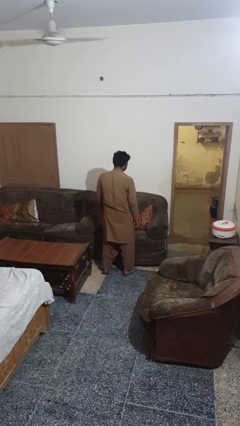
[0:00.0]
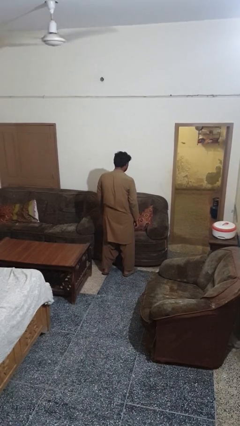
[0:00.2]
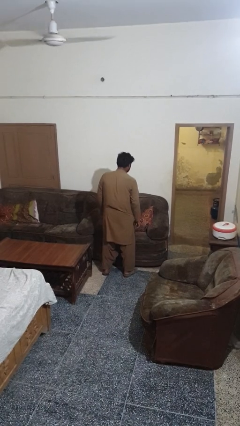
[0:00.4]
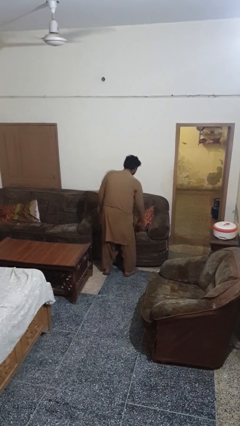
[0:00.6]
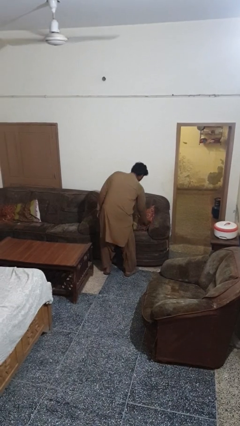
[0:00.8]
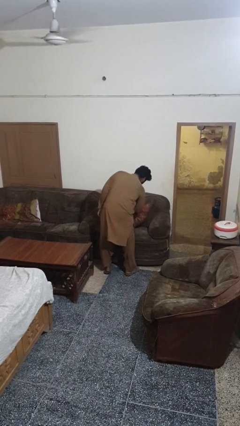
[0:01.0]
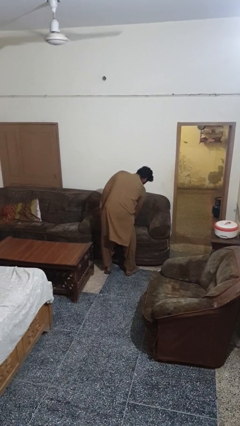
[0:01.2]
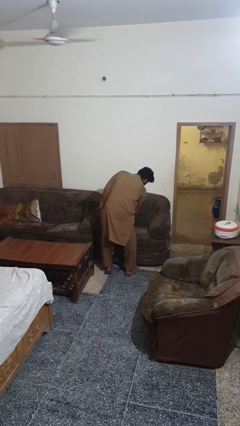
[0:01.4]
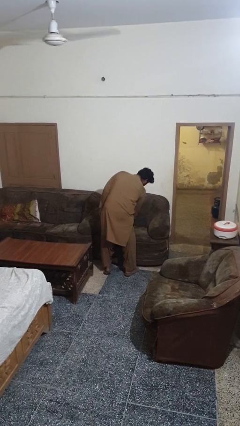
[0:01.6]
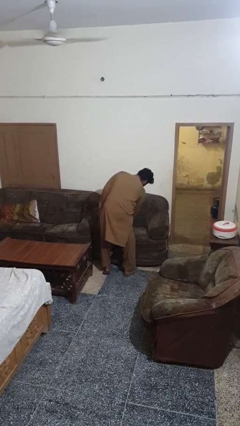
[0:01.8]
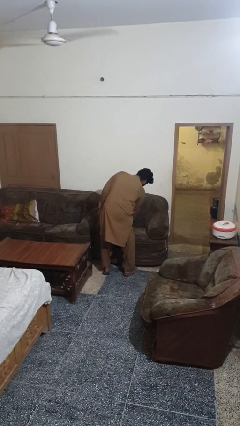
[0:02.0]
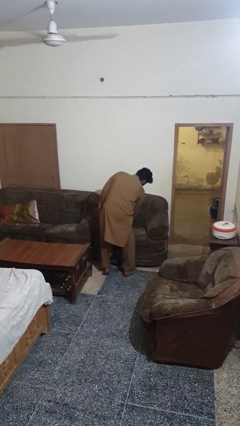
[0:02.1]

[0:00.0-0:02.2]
person searches in couch

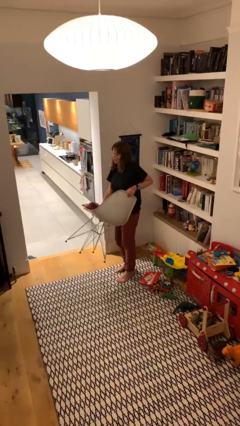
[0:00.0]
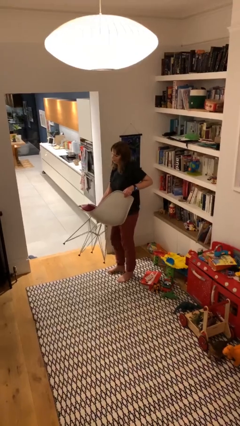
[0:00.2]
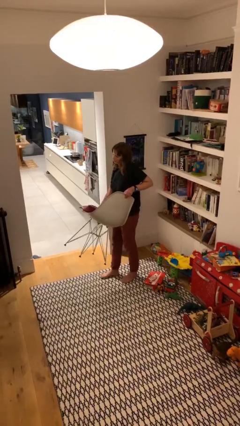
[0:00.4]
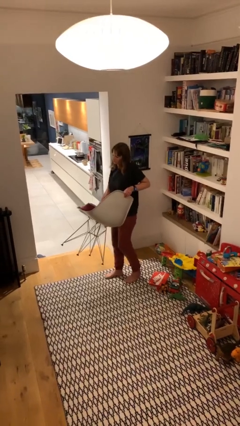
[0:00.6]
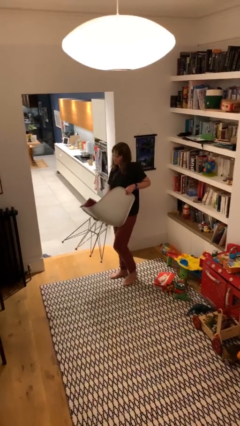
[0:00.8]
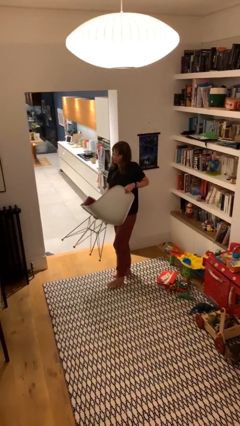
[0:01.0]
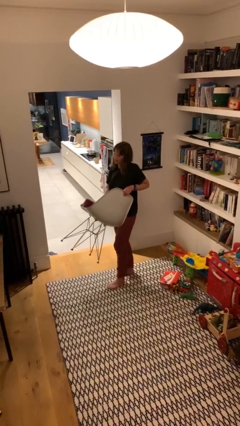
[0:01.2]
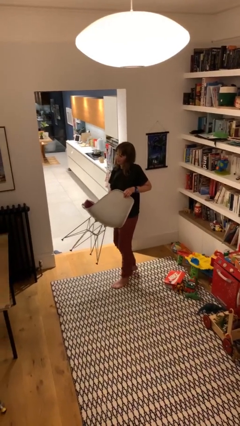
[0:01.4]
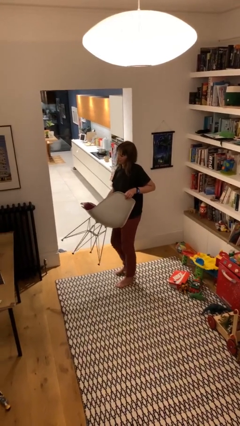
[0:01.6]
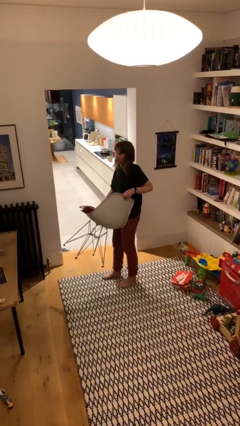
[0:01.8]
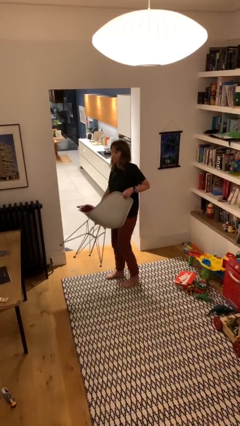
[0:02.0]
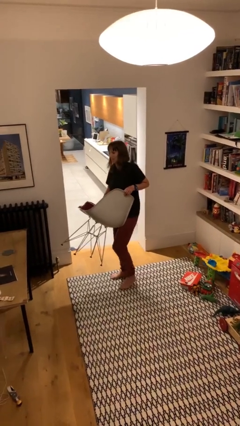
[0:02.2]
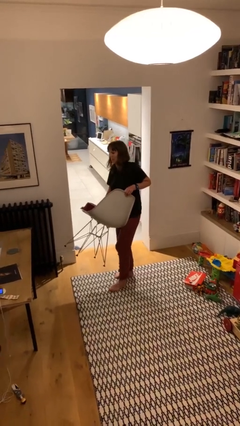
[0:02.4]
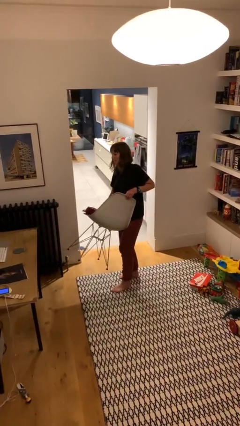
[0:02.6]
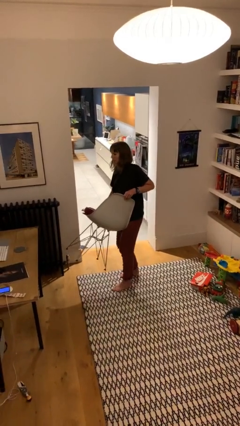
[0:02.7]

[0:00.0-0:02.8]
person carries heavy object

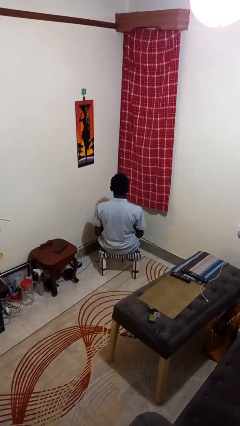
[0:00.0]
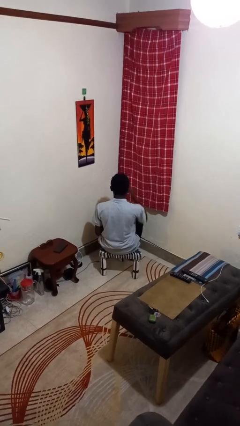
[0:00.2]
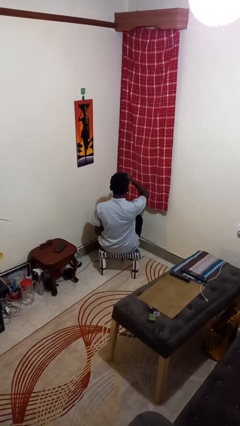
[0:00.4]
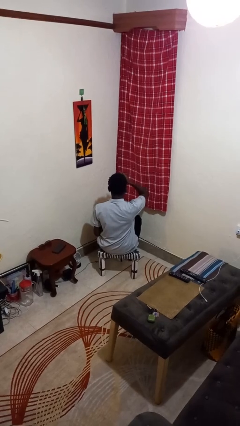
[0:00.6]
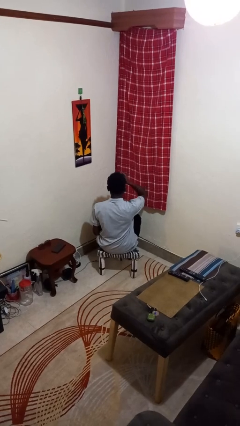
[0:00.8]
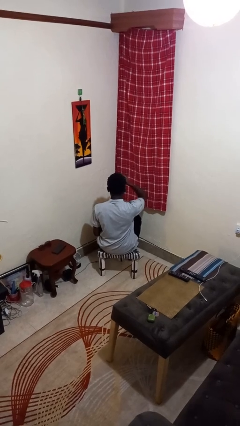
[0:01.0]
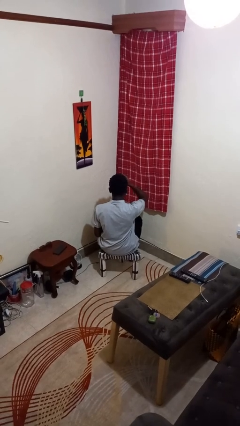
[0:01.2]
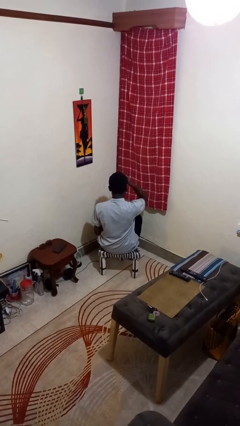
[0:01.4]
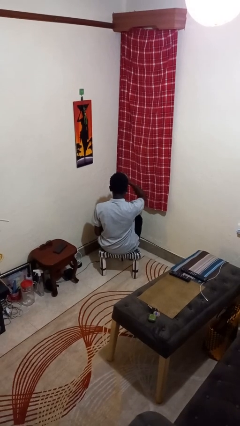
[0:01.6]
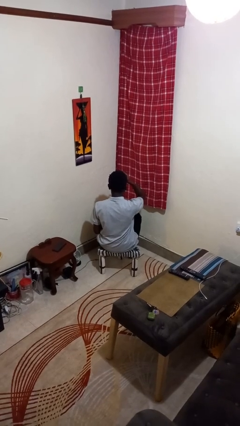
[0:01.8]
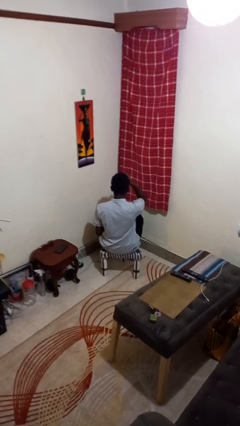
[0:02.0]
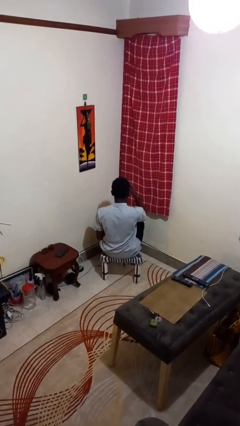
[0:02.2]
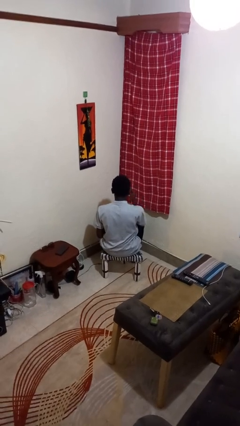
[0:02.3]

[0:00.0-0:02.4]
person scratches face

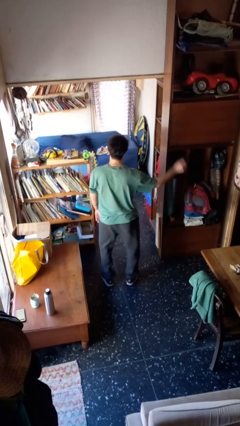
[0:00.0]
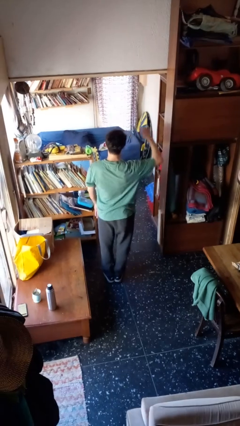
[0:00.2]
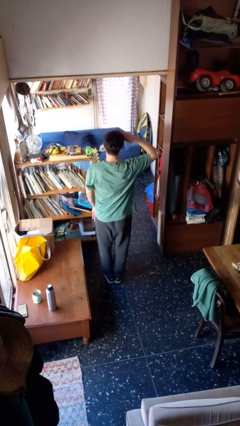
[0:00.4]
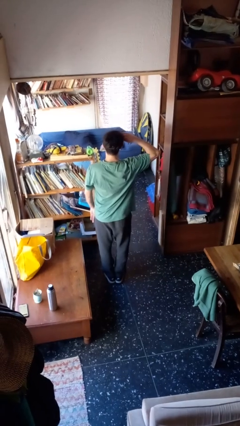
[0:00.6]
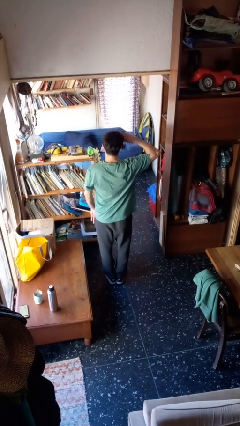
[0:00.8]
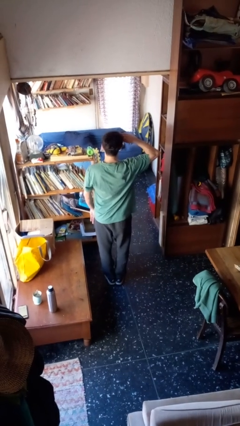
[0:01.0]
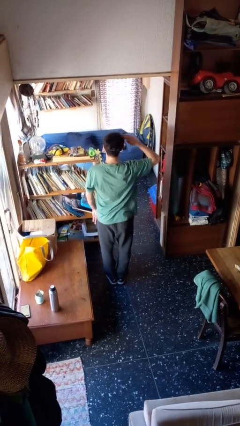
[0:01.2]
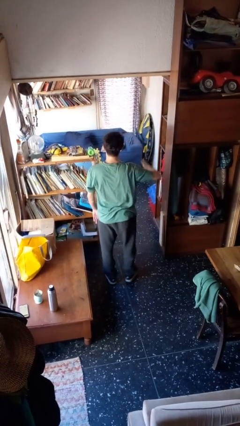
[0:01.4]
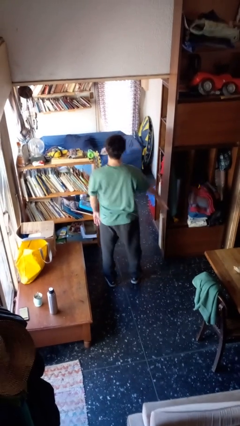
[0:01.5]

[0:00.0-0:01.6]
person salutes

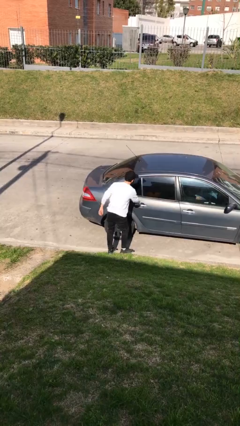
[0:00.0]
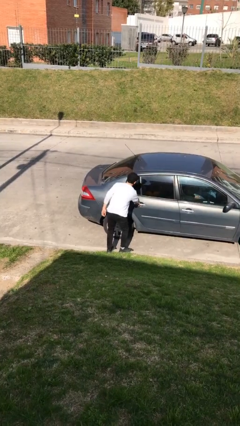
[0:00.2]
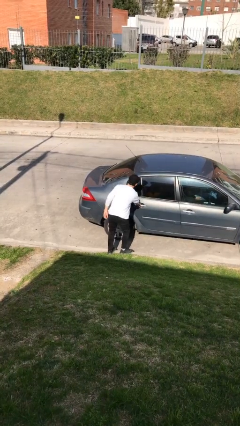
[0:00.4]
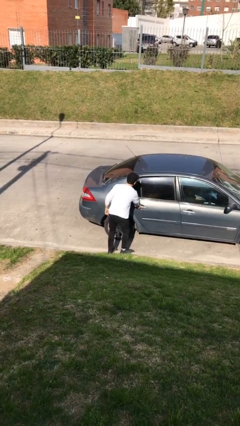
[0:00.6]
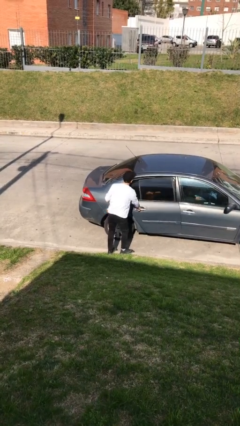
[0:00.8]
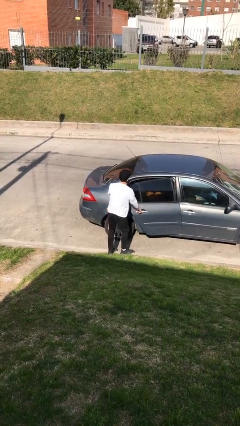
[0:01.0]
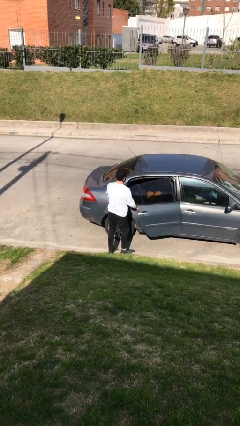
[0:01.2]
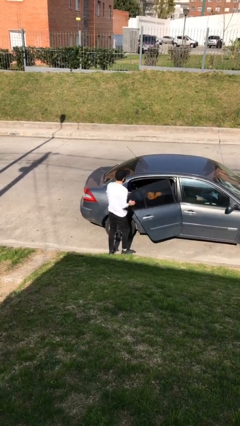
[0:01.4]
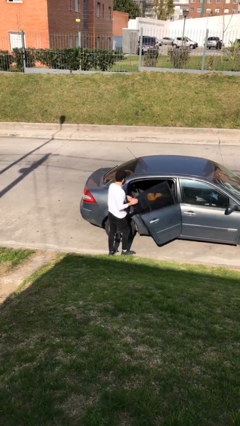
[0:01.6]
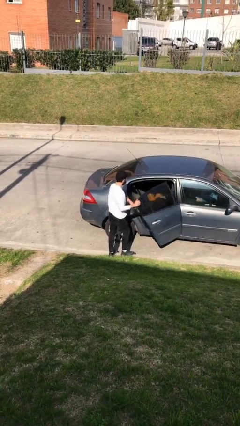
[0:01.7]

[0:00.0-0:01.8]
person opens car door

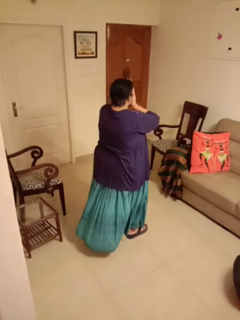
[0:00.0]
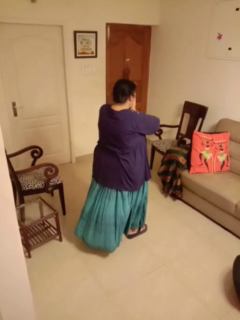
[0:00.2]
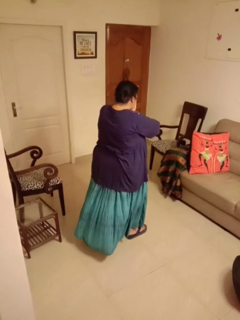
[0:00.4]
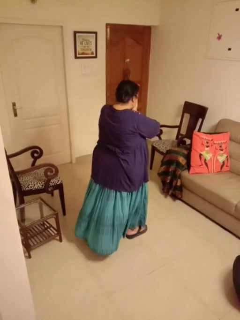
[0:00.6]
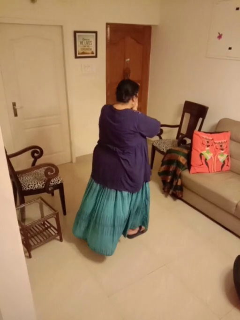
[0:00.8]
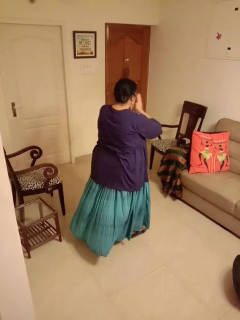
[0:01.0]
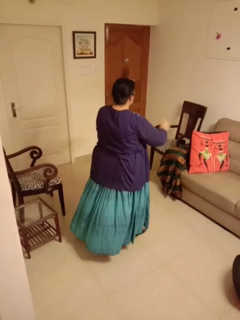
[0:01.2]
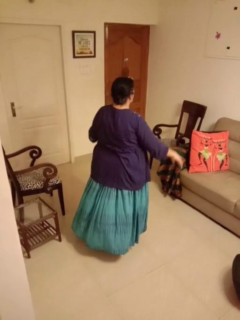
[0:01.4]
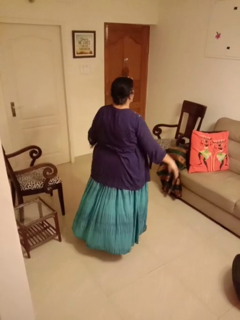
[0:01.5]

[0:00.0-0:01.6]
person sneezes into hand

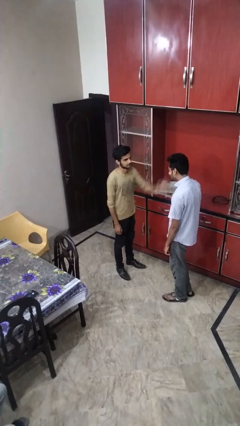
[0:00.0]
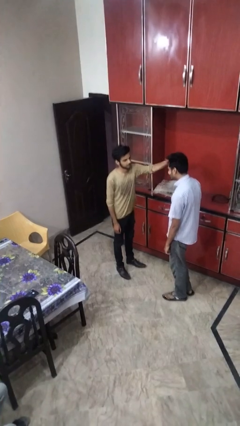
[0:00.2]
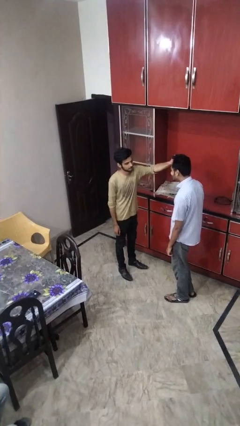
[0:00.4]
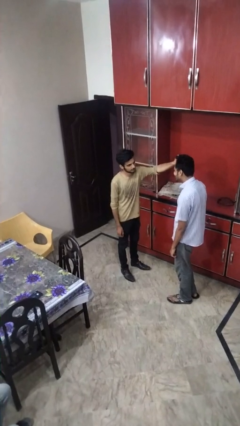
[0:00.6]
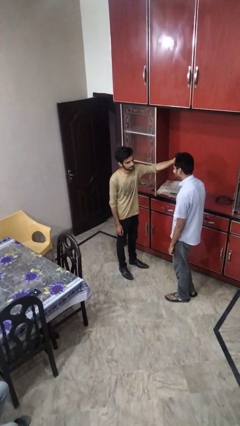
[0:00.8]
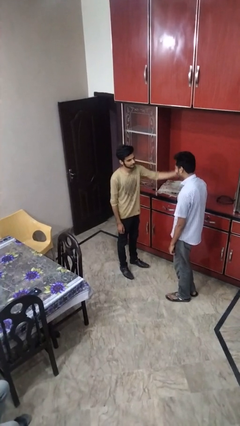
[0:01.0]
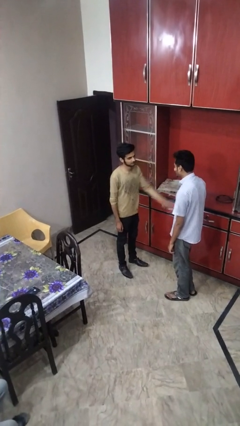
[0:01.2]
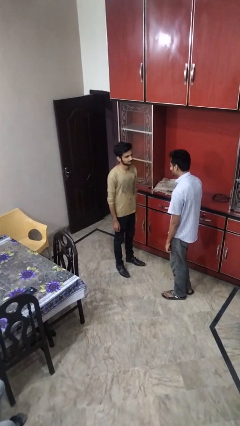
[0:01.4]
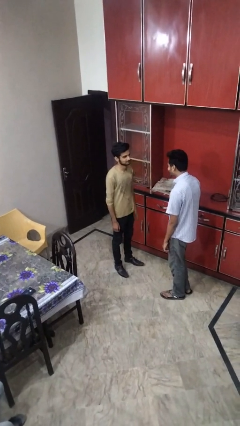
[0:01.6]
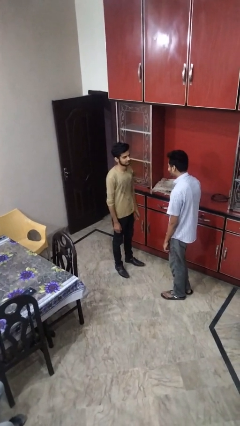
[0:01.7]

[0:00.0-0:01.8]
person grabs person by hair

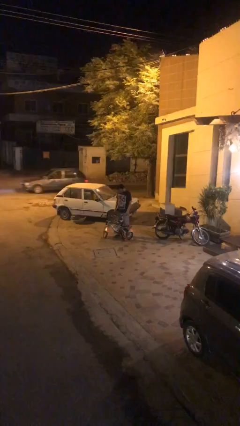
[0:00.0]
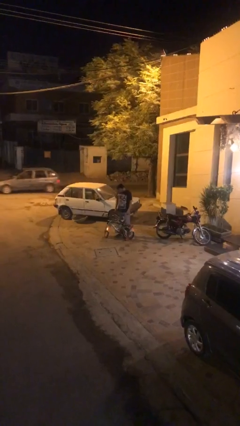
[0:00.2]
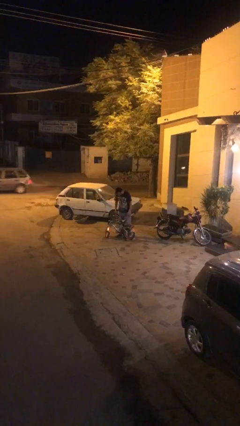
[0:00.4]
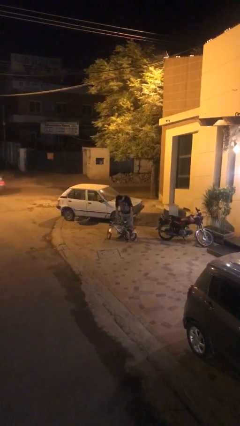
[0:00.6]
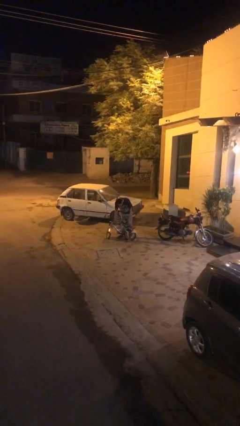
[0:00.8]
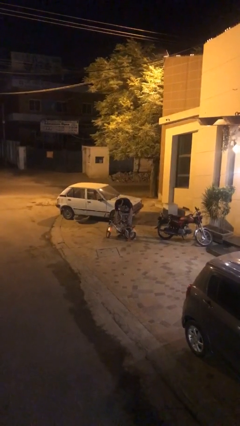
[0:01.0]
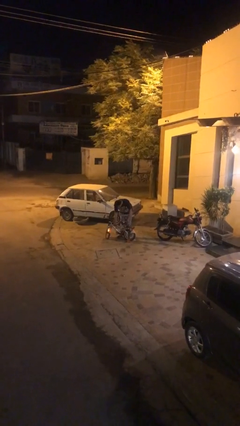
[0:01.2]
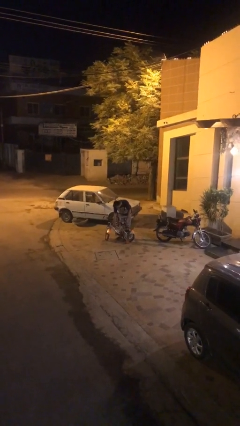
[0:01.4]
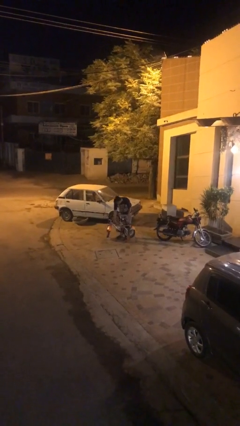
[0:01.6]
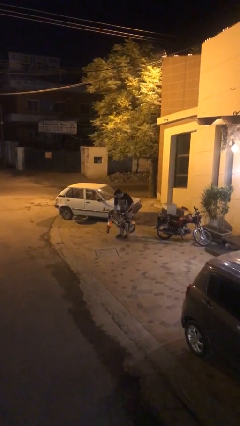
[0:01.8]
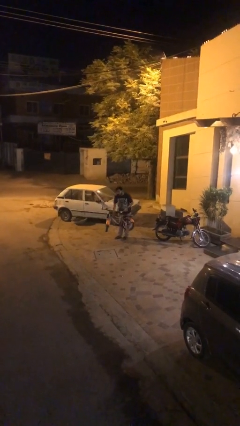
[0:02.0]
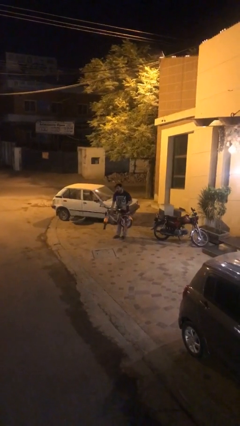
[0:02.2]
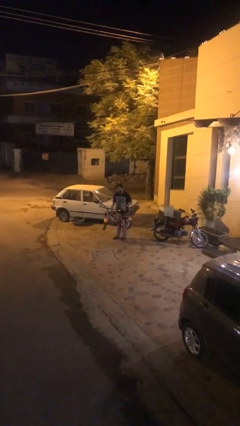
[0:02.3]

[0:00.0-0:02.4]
person picks up object from floor

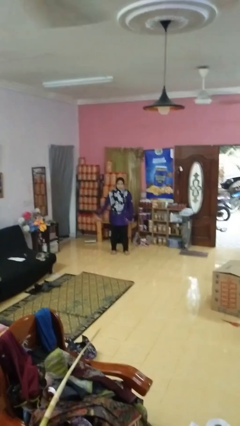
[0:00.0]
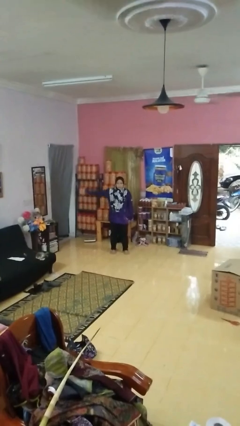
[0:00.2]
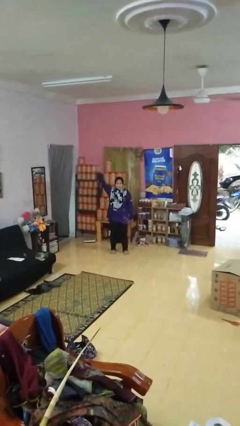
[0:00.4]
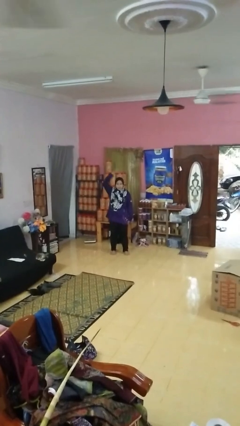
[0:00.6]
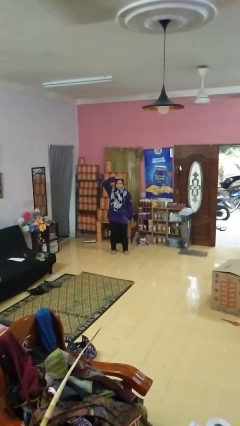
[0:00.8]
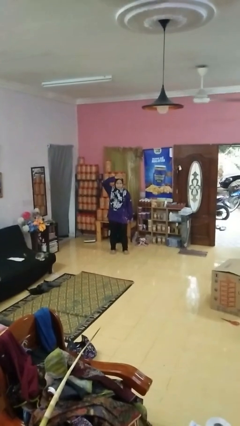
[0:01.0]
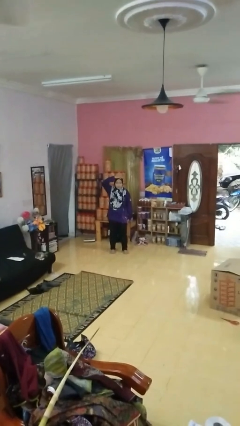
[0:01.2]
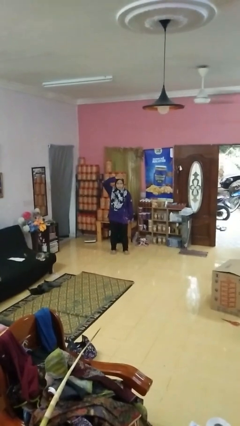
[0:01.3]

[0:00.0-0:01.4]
person pats head
